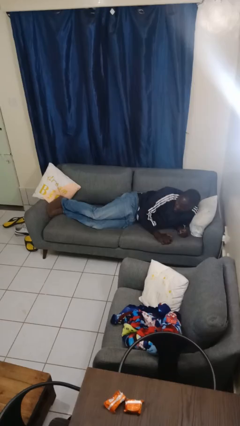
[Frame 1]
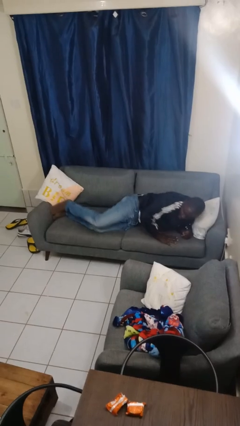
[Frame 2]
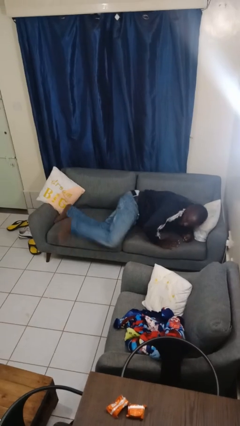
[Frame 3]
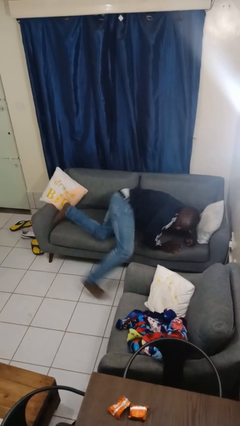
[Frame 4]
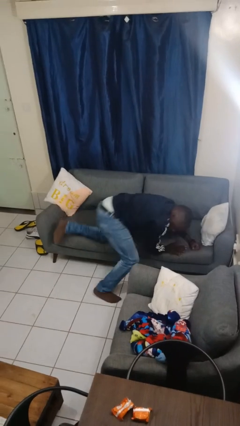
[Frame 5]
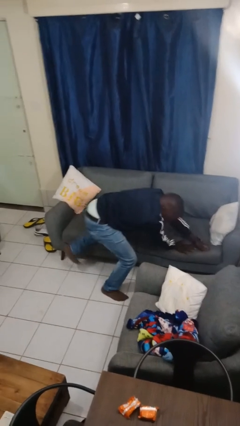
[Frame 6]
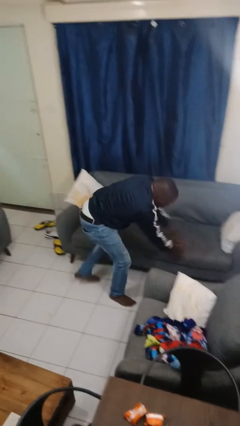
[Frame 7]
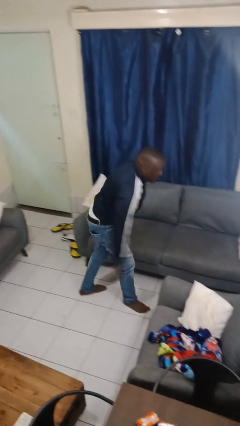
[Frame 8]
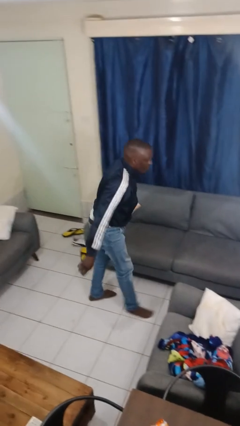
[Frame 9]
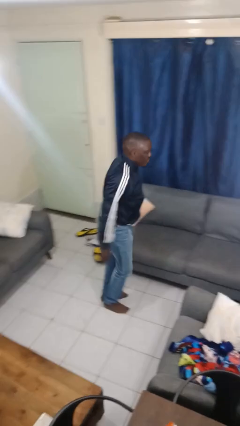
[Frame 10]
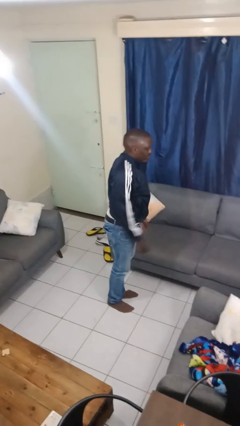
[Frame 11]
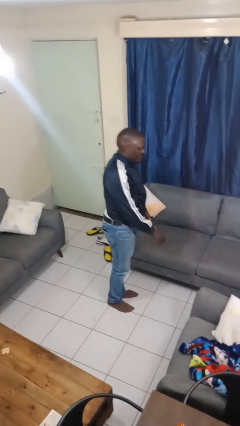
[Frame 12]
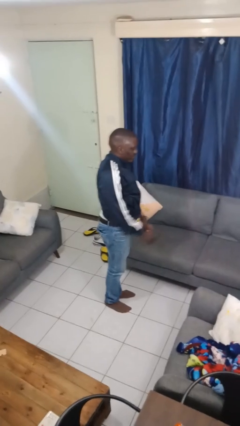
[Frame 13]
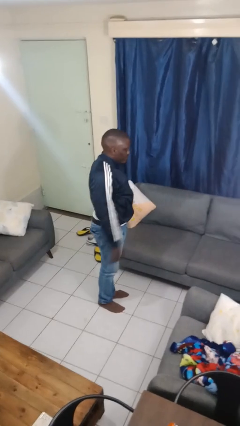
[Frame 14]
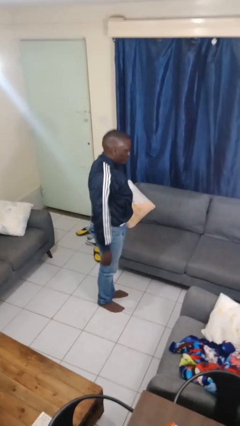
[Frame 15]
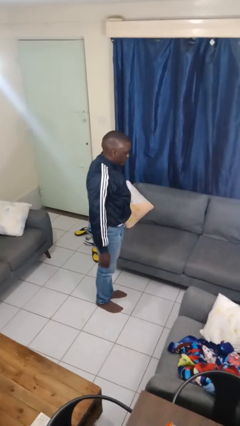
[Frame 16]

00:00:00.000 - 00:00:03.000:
person stands up

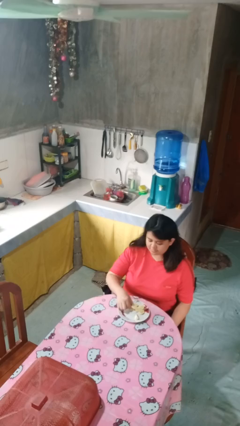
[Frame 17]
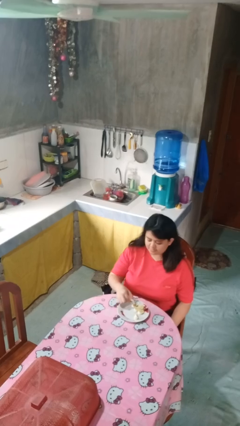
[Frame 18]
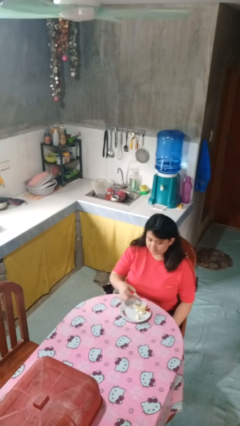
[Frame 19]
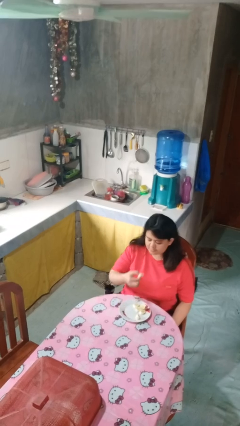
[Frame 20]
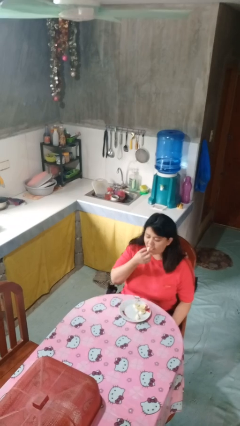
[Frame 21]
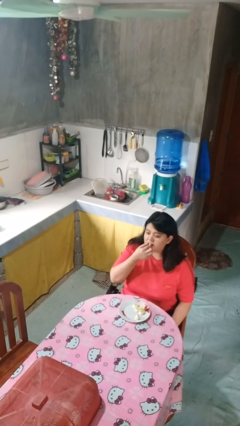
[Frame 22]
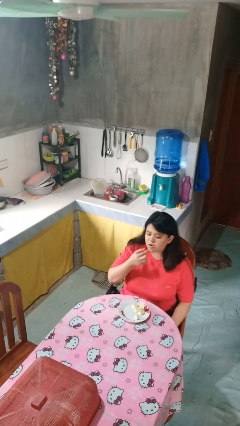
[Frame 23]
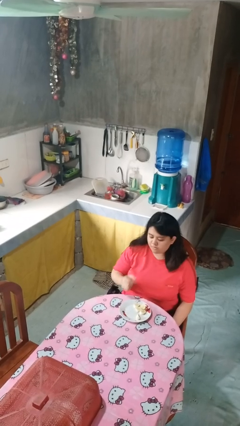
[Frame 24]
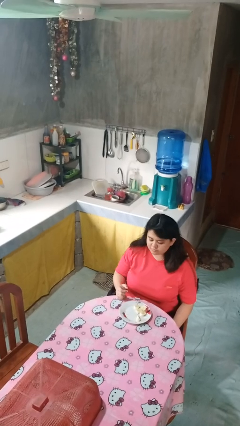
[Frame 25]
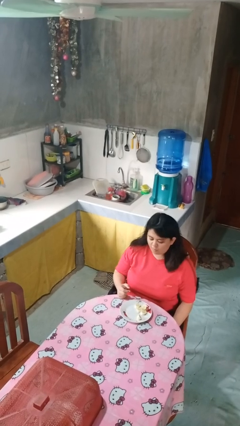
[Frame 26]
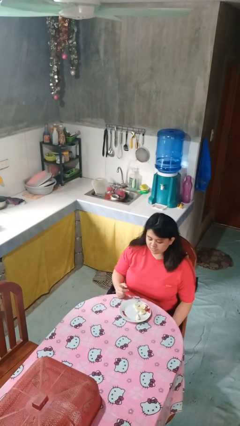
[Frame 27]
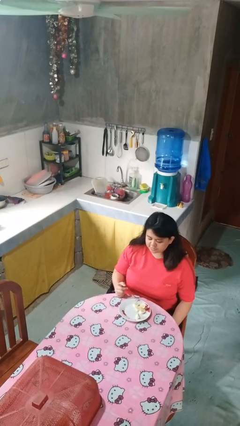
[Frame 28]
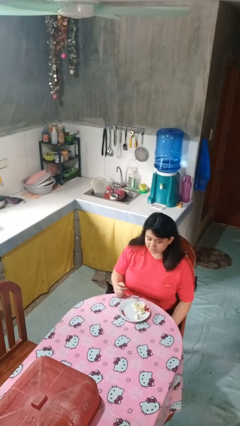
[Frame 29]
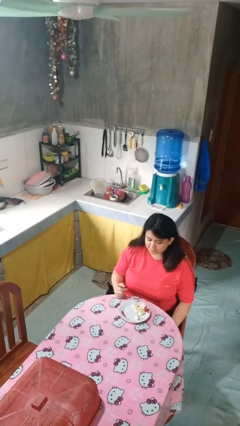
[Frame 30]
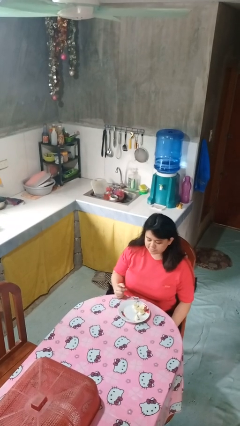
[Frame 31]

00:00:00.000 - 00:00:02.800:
person eats with hands

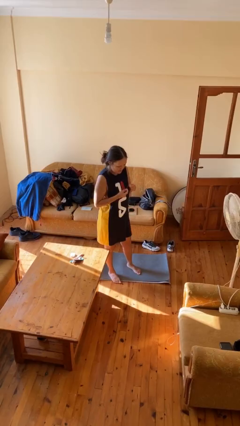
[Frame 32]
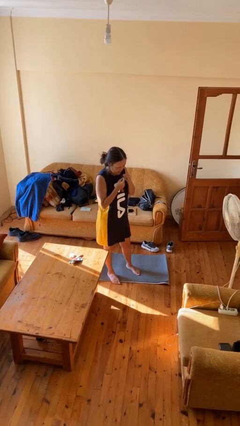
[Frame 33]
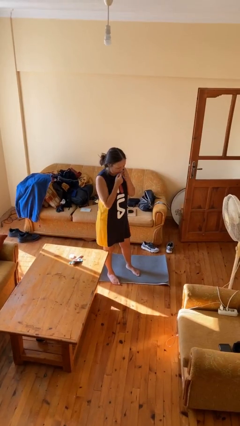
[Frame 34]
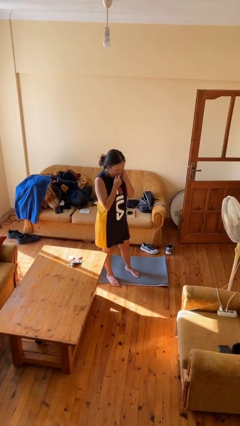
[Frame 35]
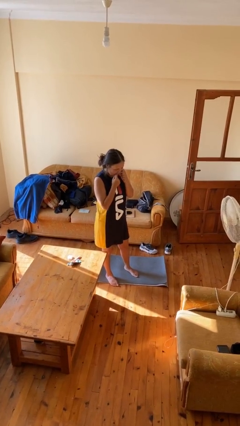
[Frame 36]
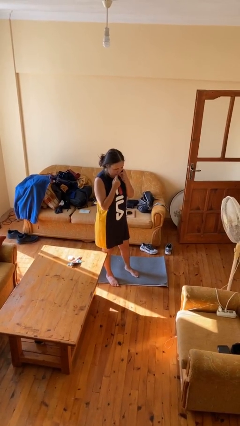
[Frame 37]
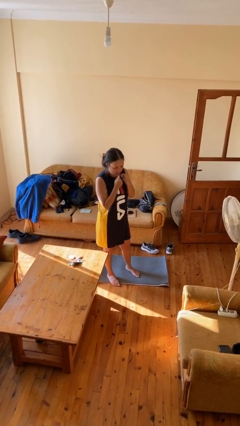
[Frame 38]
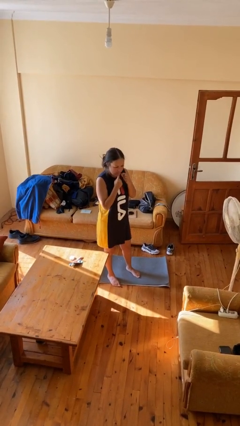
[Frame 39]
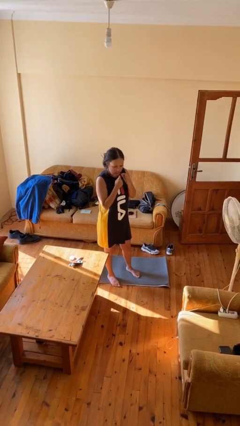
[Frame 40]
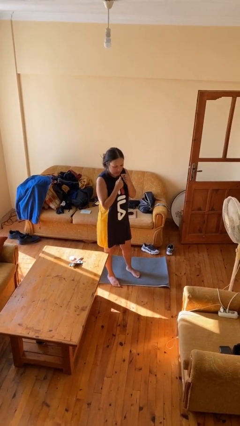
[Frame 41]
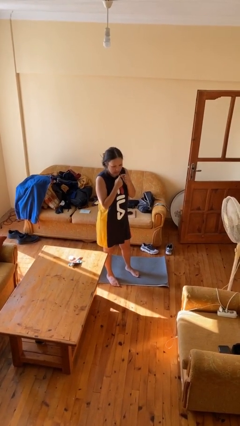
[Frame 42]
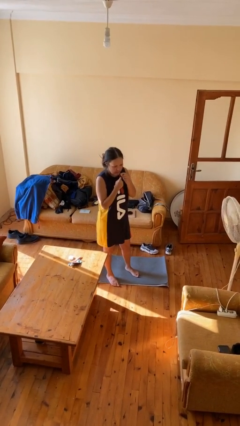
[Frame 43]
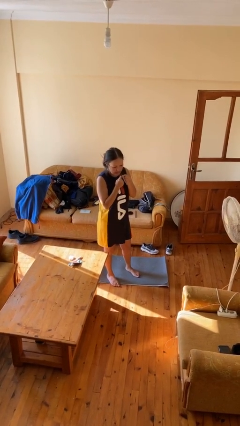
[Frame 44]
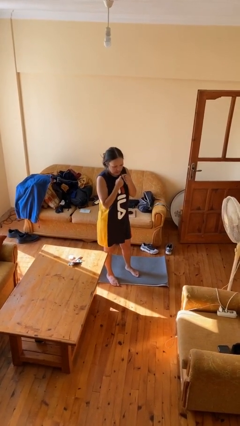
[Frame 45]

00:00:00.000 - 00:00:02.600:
person flosses

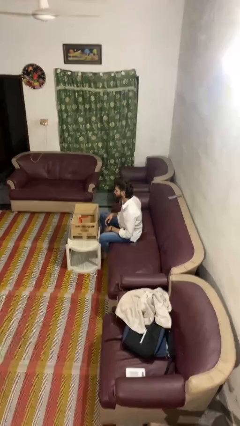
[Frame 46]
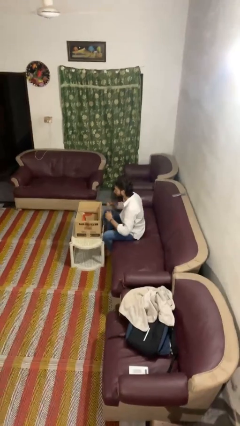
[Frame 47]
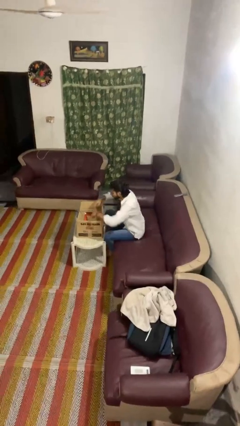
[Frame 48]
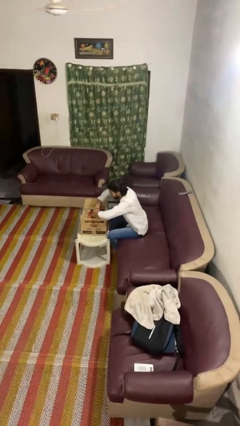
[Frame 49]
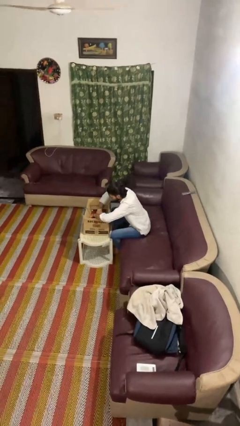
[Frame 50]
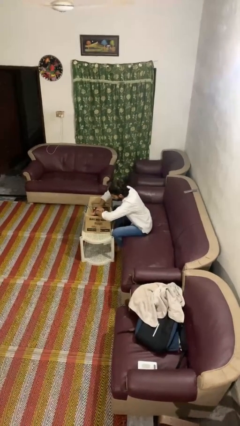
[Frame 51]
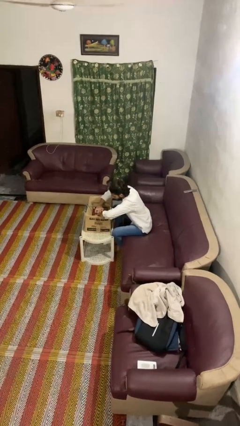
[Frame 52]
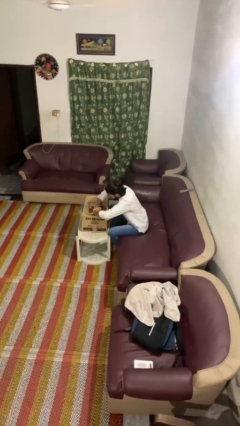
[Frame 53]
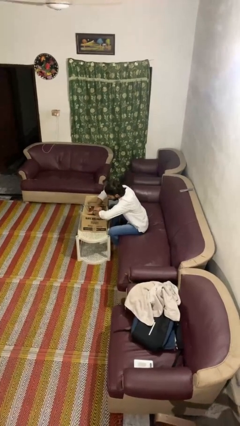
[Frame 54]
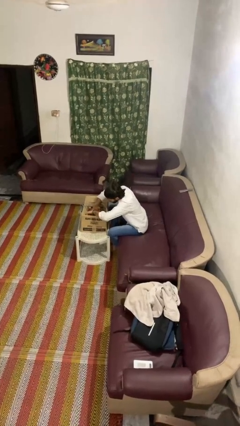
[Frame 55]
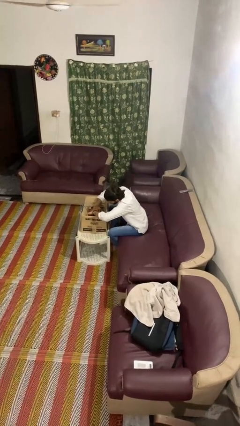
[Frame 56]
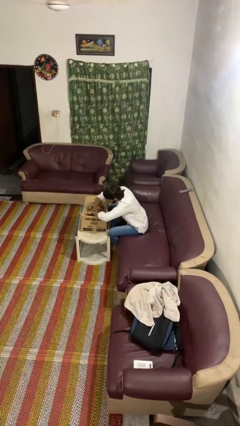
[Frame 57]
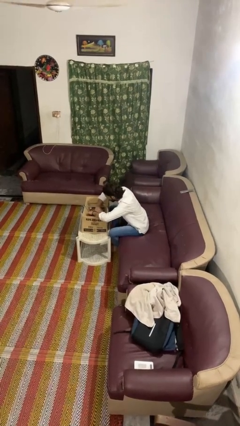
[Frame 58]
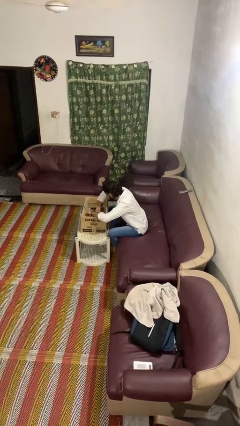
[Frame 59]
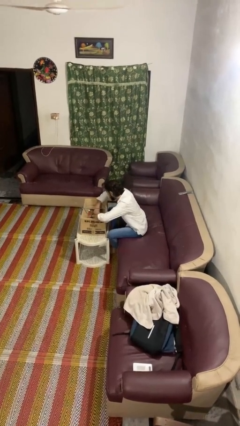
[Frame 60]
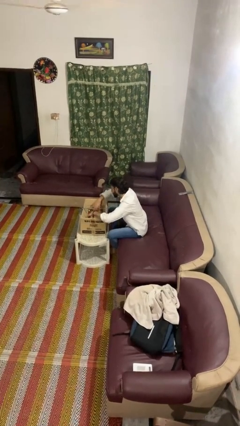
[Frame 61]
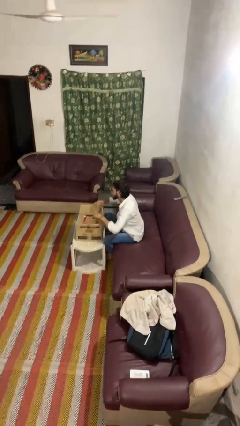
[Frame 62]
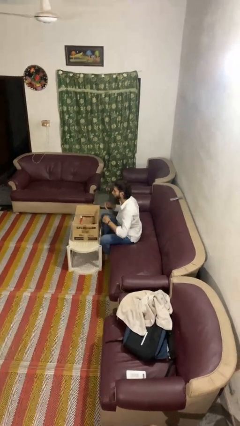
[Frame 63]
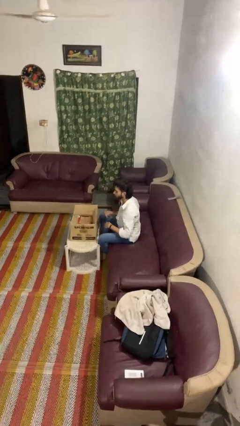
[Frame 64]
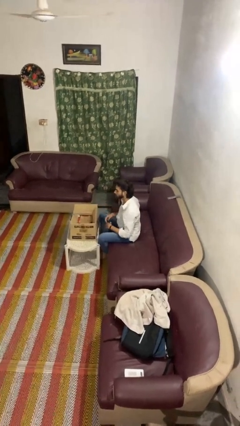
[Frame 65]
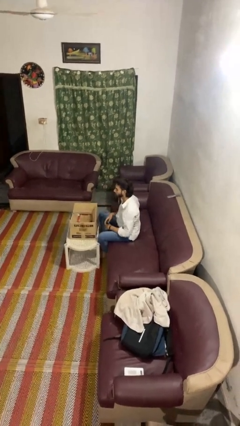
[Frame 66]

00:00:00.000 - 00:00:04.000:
person searches in box

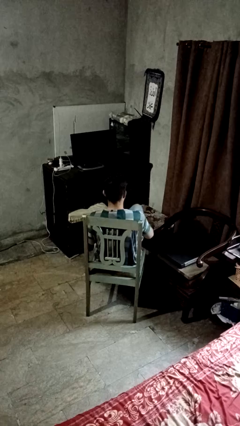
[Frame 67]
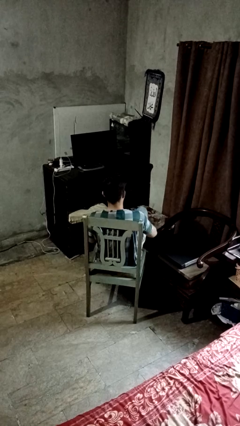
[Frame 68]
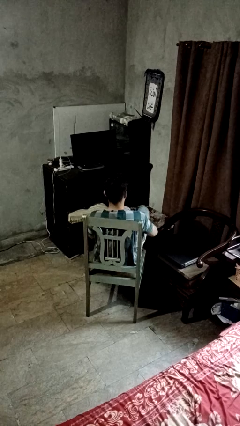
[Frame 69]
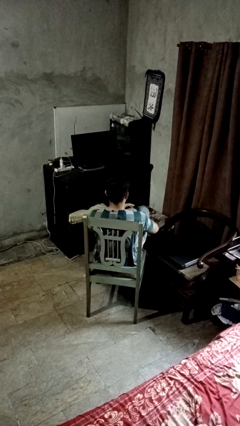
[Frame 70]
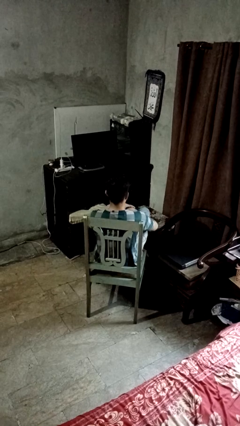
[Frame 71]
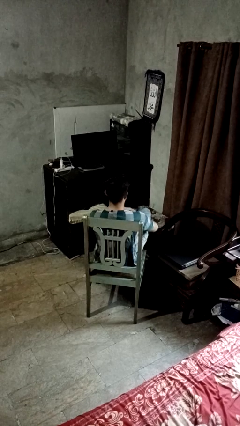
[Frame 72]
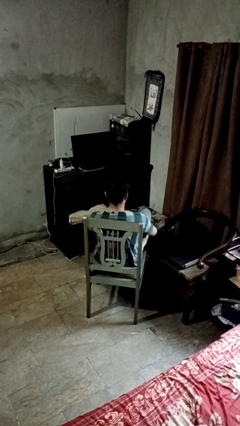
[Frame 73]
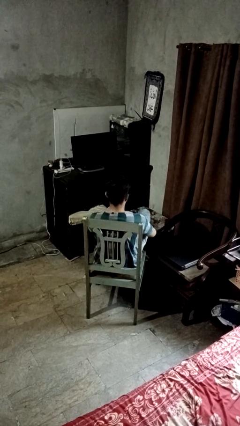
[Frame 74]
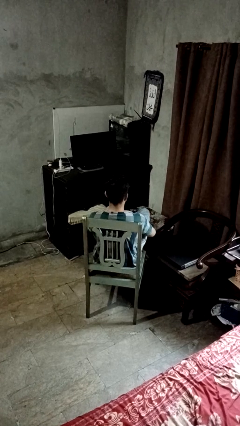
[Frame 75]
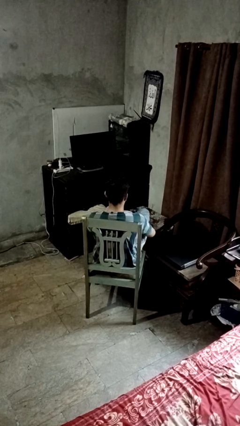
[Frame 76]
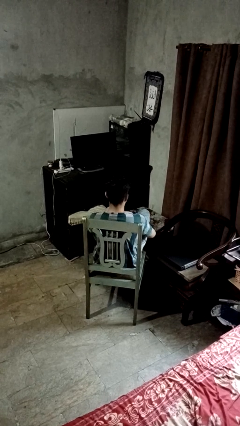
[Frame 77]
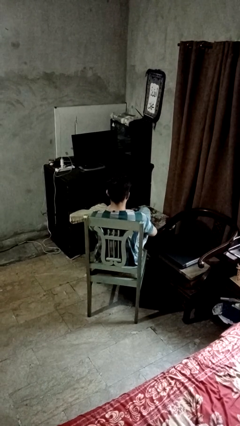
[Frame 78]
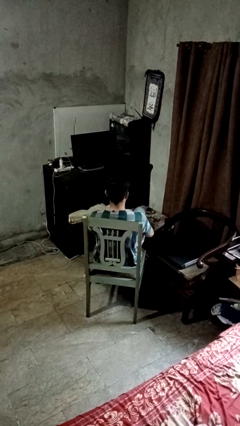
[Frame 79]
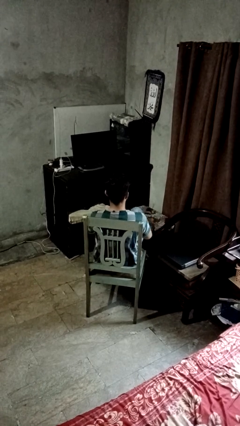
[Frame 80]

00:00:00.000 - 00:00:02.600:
person puts feet up

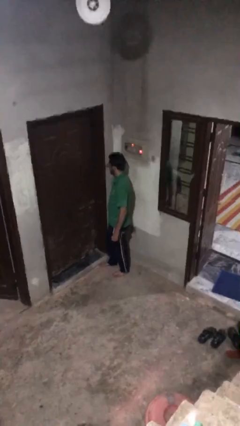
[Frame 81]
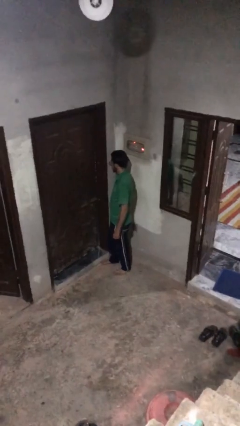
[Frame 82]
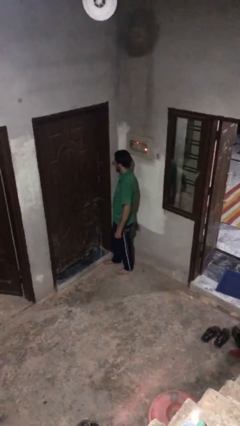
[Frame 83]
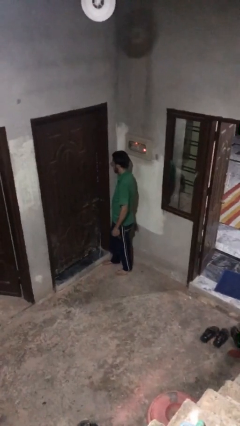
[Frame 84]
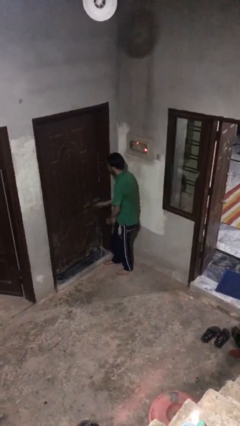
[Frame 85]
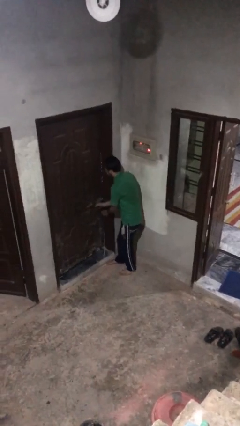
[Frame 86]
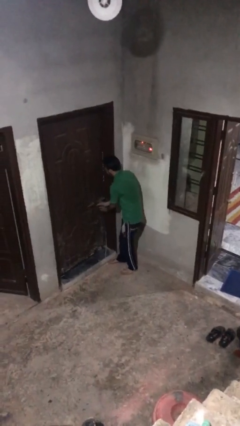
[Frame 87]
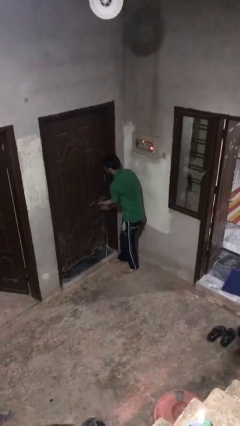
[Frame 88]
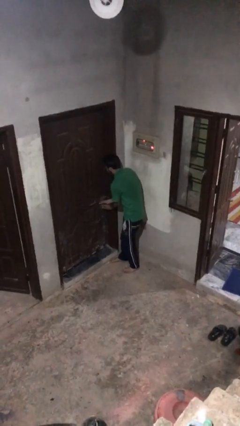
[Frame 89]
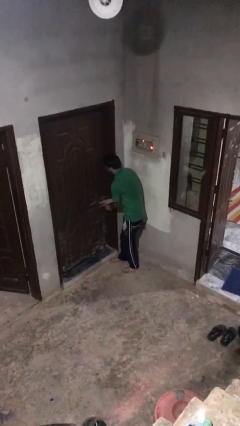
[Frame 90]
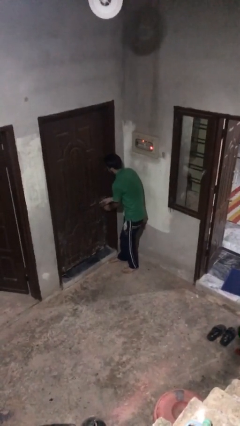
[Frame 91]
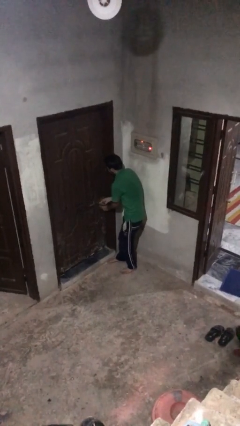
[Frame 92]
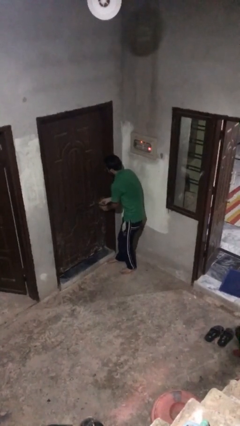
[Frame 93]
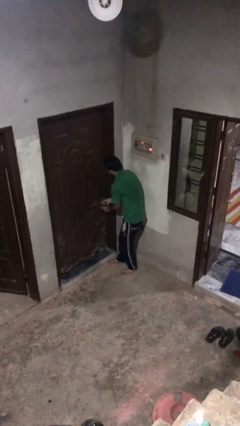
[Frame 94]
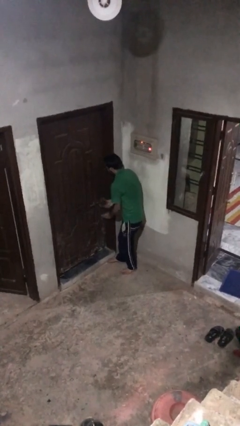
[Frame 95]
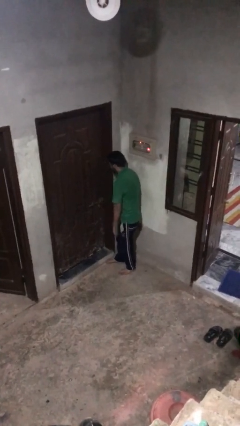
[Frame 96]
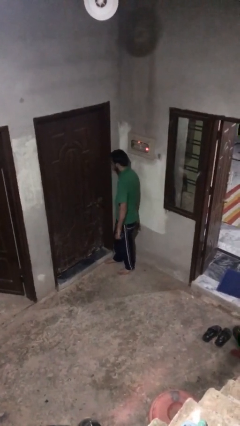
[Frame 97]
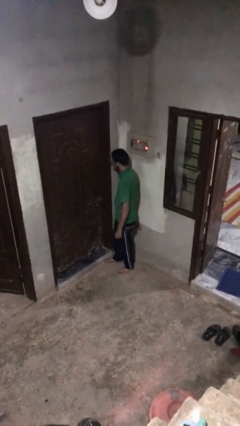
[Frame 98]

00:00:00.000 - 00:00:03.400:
person locks door with keys
